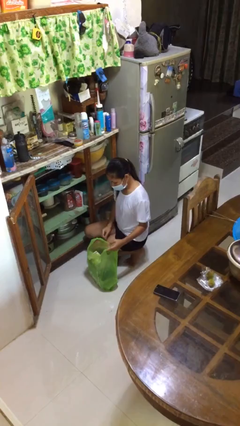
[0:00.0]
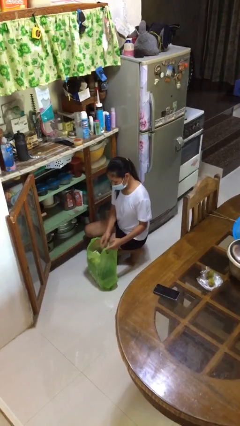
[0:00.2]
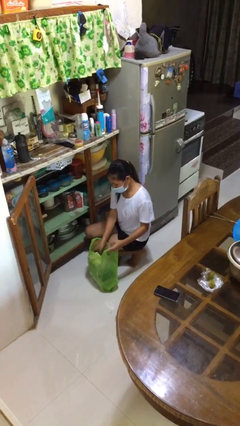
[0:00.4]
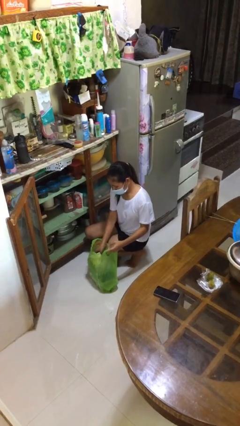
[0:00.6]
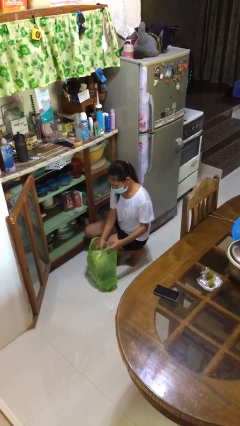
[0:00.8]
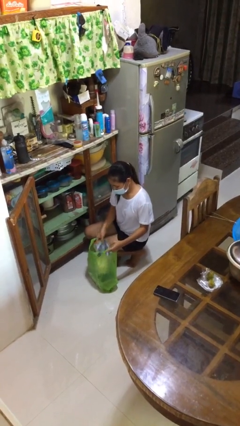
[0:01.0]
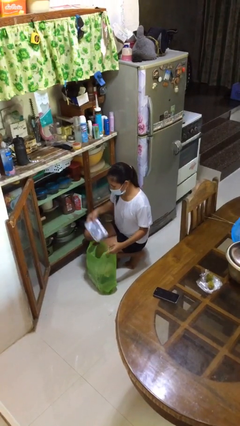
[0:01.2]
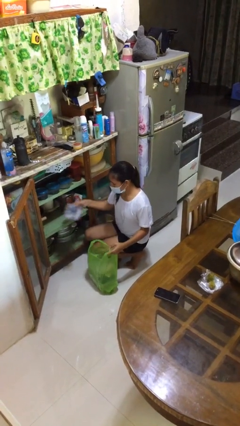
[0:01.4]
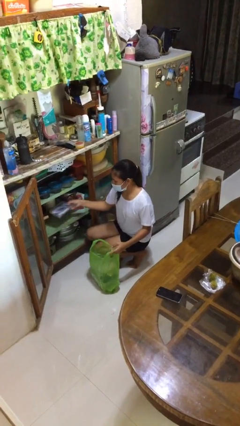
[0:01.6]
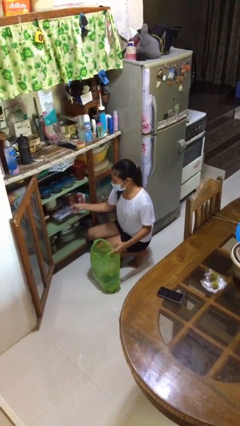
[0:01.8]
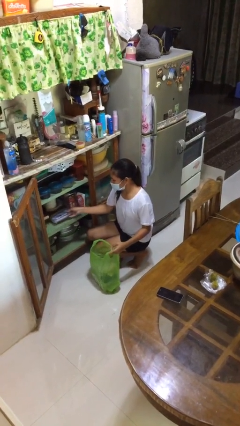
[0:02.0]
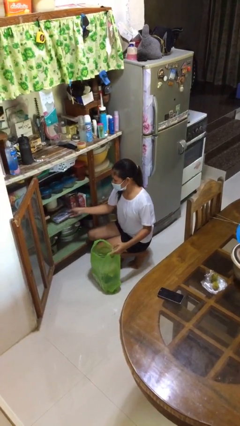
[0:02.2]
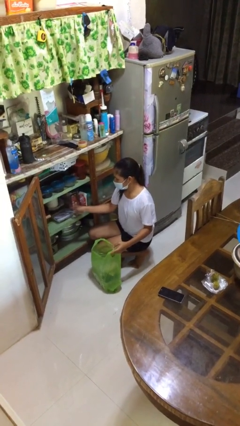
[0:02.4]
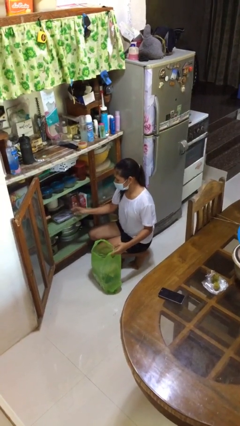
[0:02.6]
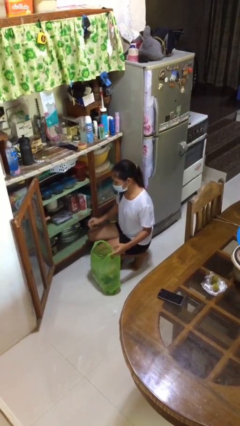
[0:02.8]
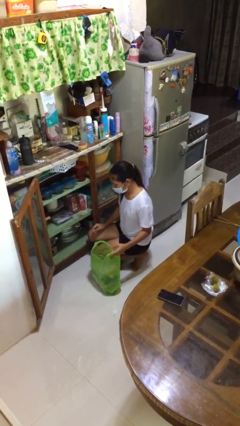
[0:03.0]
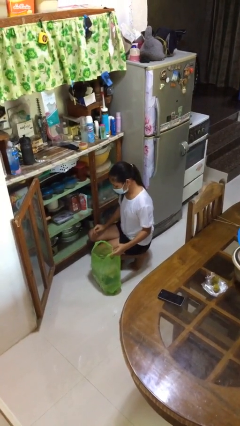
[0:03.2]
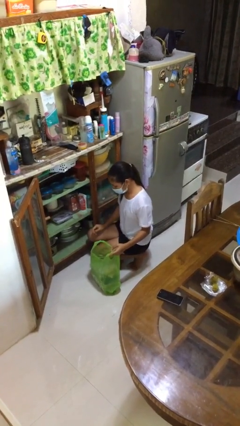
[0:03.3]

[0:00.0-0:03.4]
person loads groceries into cabinet

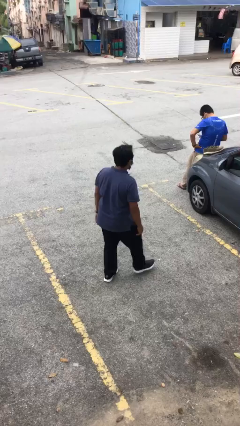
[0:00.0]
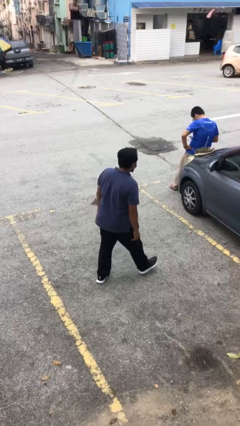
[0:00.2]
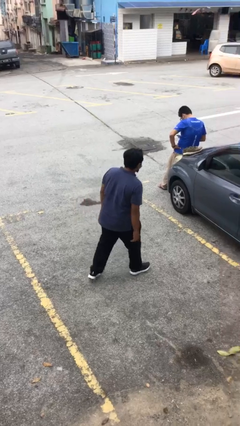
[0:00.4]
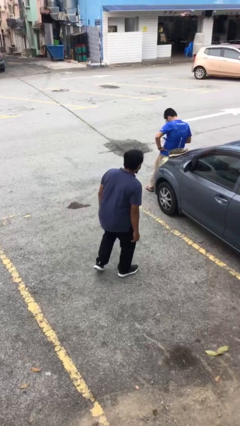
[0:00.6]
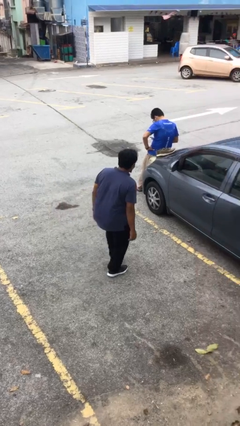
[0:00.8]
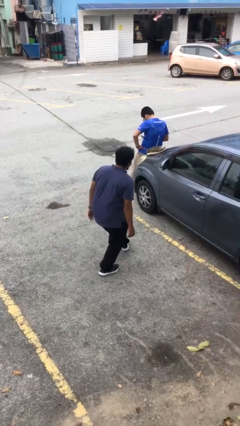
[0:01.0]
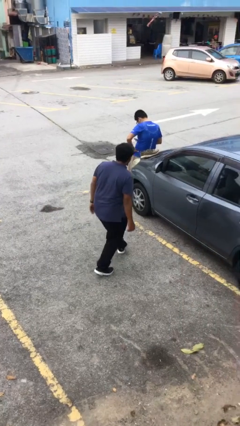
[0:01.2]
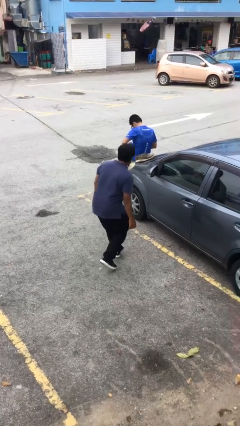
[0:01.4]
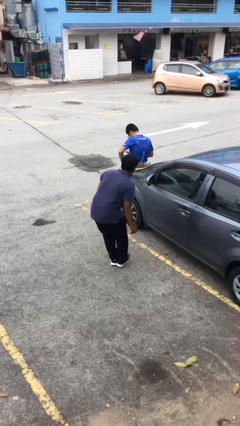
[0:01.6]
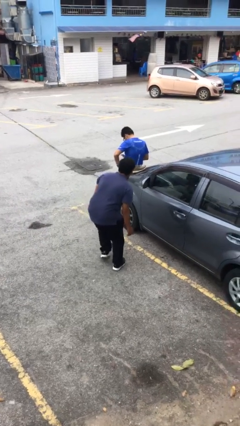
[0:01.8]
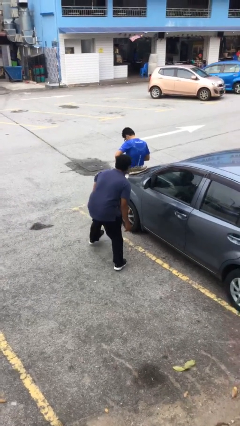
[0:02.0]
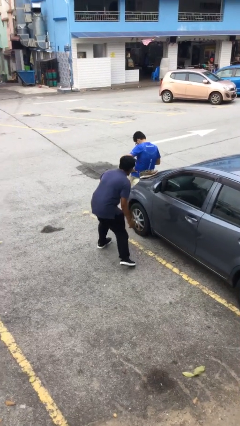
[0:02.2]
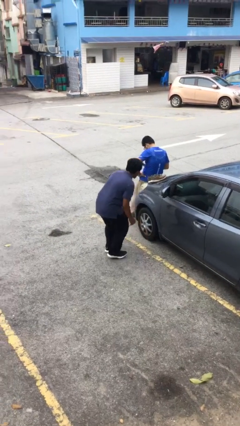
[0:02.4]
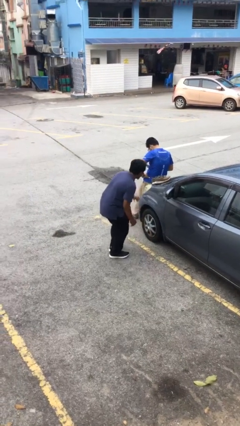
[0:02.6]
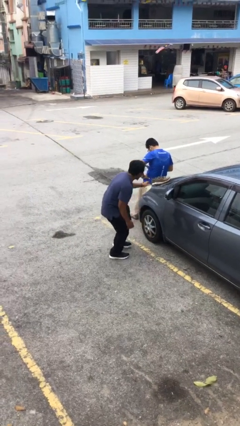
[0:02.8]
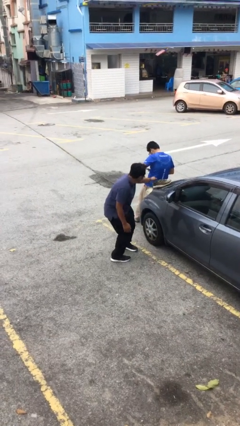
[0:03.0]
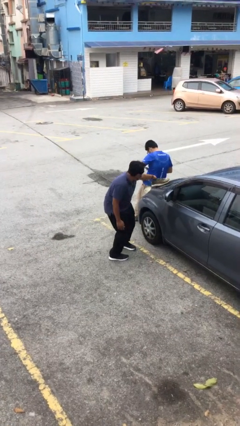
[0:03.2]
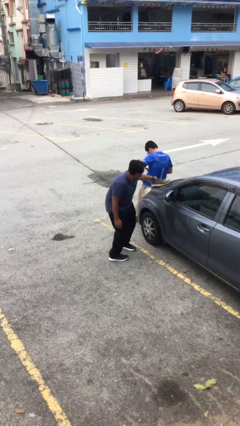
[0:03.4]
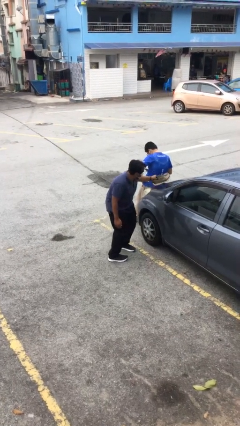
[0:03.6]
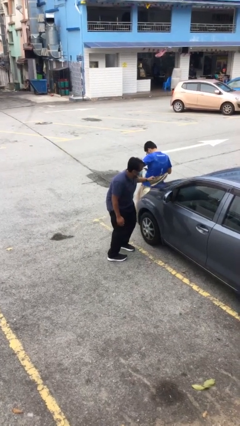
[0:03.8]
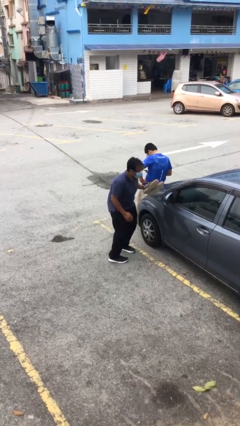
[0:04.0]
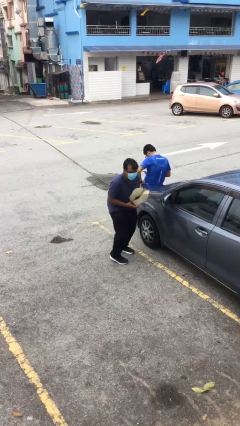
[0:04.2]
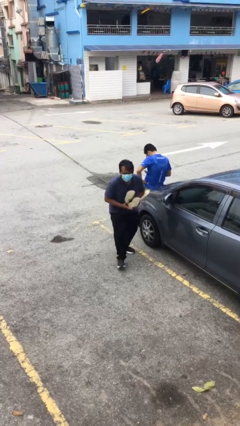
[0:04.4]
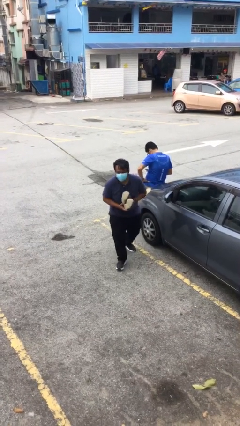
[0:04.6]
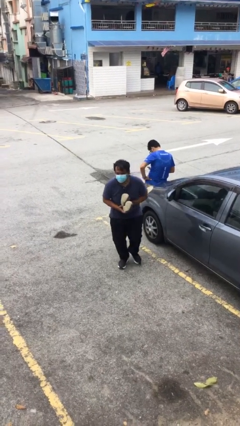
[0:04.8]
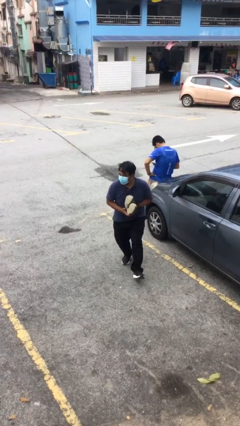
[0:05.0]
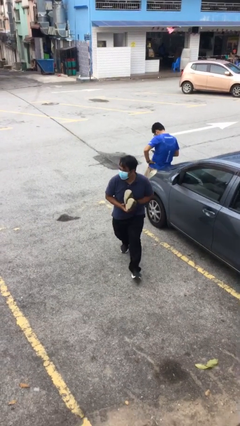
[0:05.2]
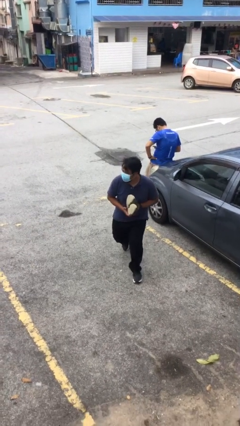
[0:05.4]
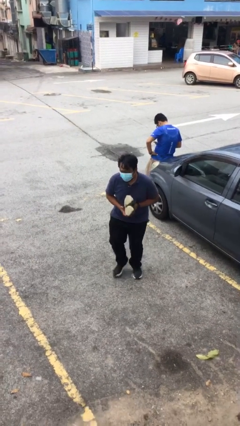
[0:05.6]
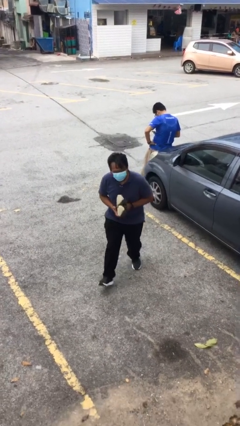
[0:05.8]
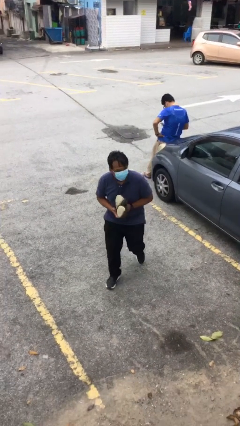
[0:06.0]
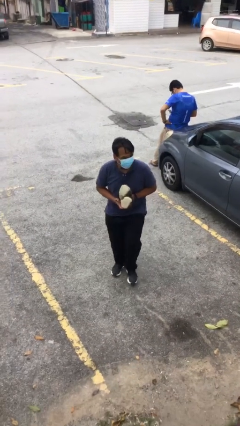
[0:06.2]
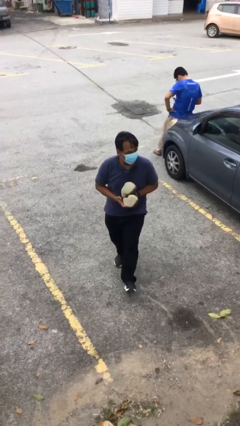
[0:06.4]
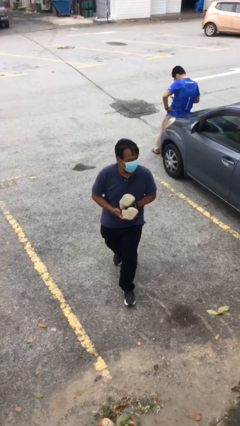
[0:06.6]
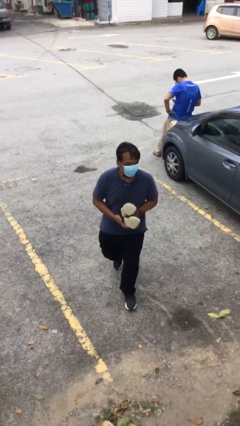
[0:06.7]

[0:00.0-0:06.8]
person steals object from person

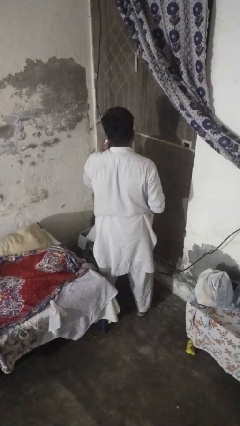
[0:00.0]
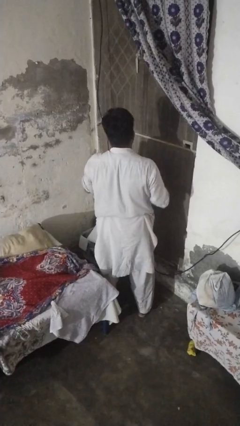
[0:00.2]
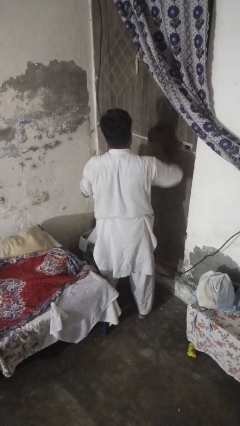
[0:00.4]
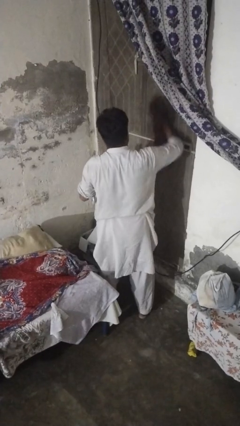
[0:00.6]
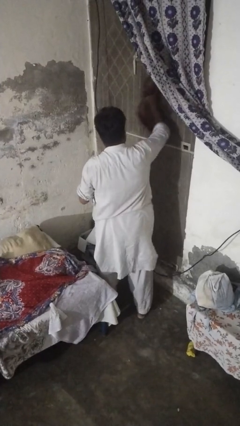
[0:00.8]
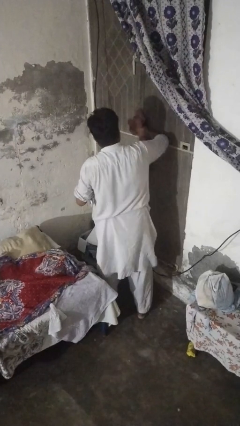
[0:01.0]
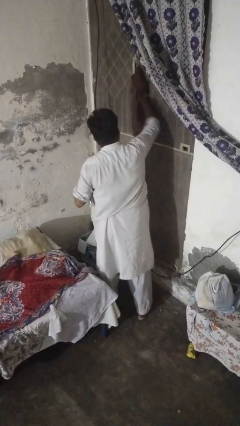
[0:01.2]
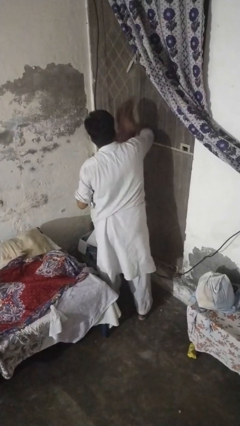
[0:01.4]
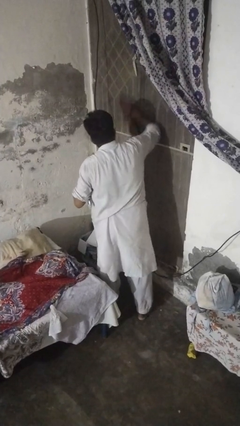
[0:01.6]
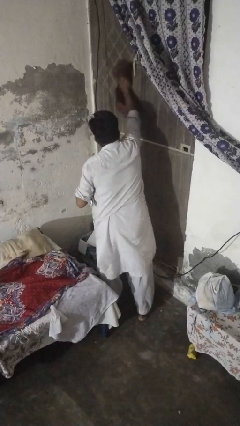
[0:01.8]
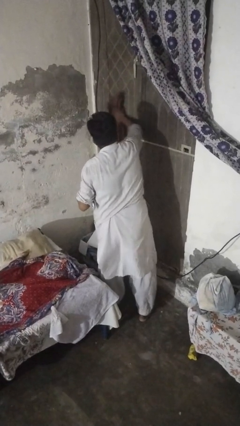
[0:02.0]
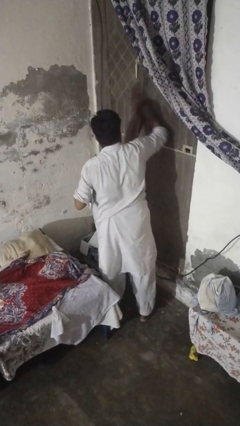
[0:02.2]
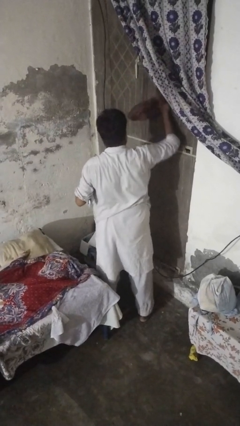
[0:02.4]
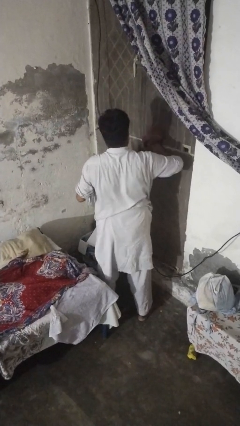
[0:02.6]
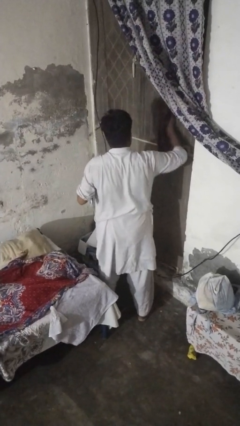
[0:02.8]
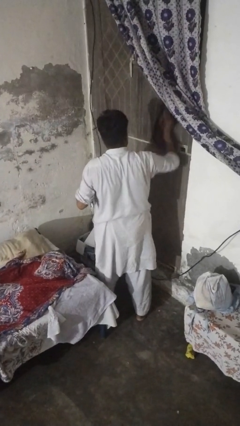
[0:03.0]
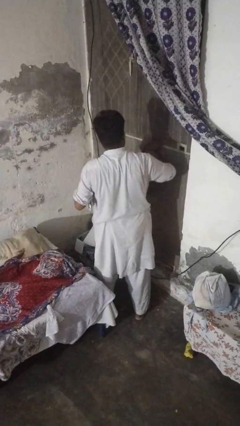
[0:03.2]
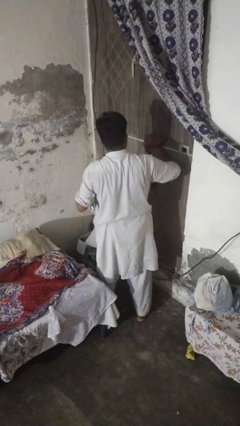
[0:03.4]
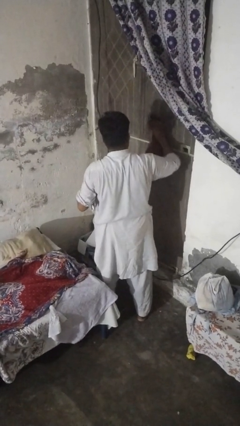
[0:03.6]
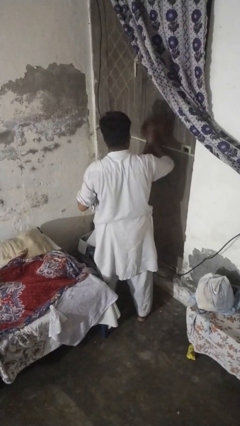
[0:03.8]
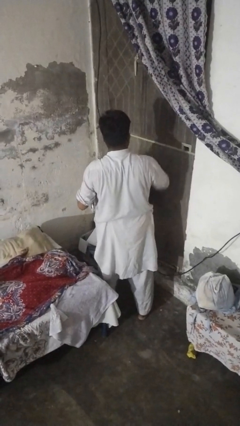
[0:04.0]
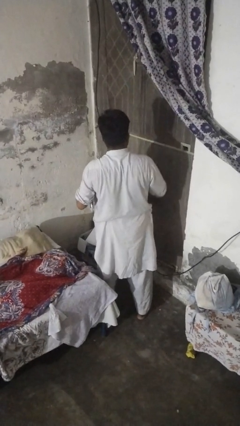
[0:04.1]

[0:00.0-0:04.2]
person washes window

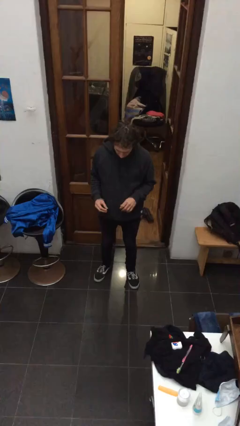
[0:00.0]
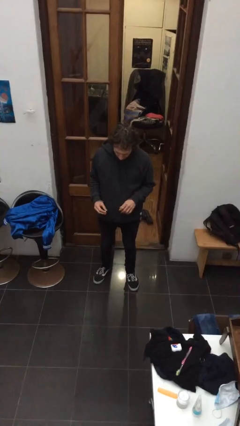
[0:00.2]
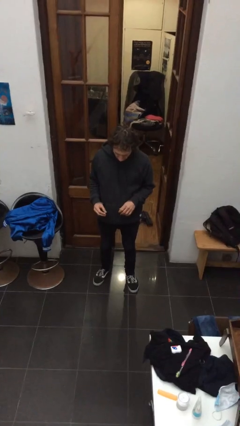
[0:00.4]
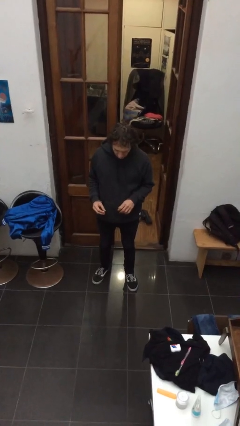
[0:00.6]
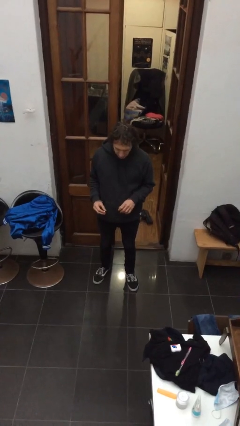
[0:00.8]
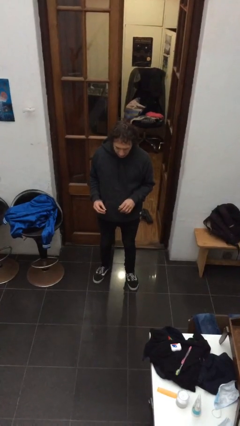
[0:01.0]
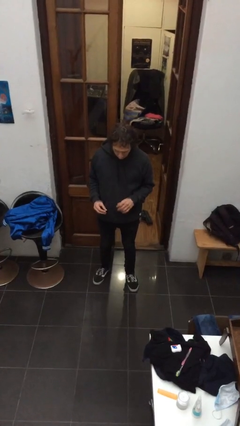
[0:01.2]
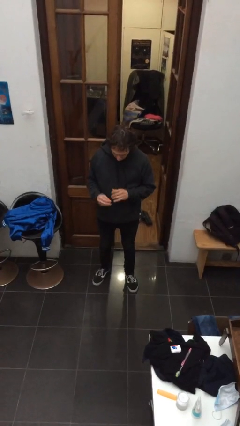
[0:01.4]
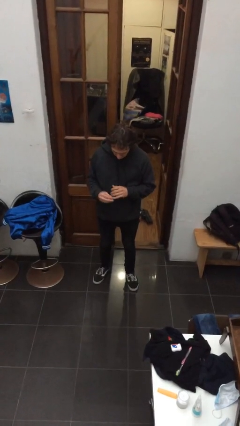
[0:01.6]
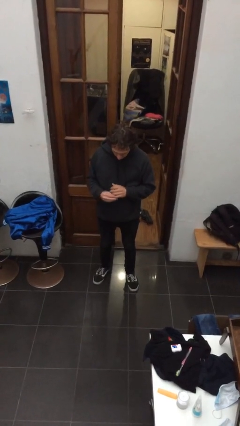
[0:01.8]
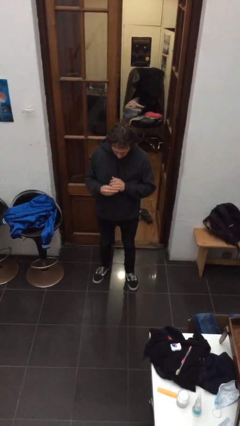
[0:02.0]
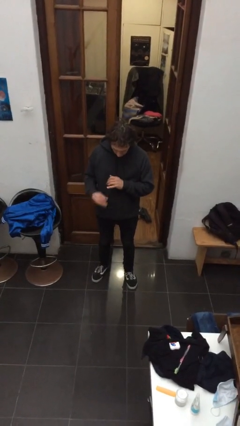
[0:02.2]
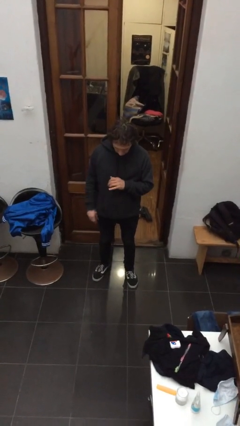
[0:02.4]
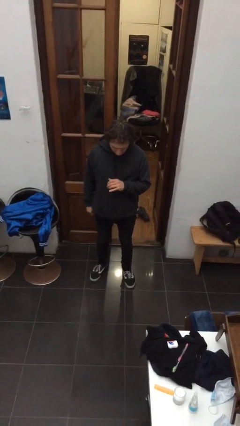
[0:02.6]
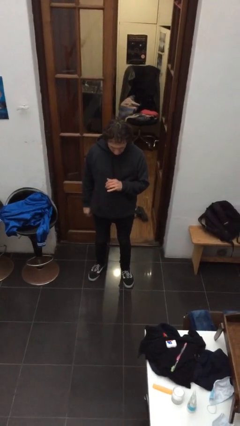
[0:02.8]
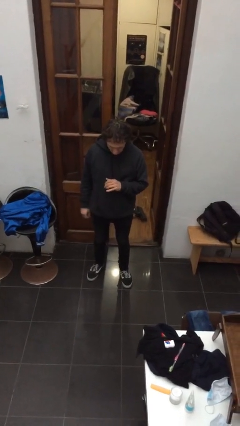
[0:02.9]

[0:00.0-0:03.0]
person puts on ring

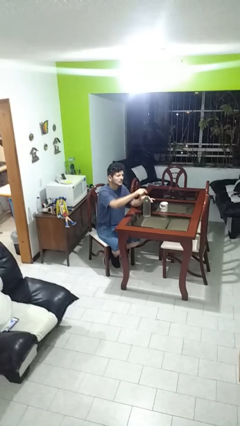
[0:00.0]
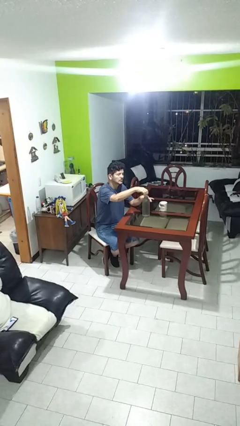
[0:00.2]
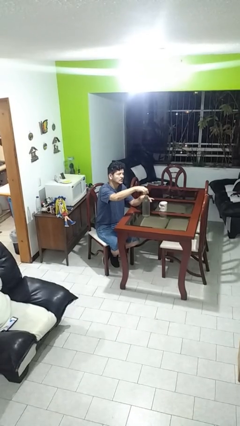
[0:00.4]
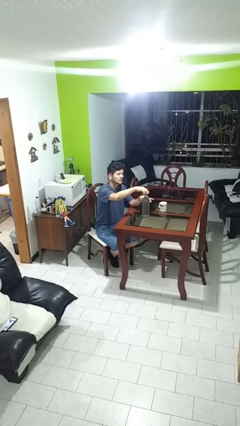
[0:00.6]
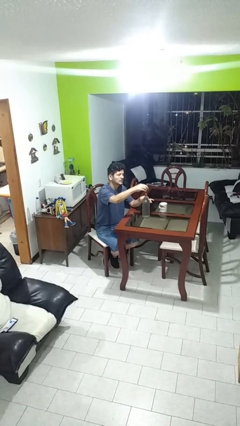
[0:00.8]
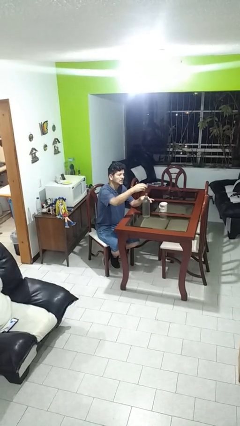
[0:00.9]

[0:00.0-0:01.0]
person unscrews lid from bottle
